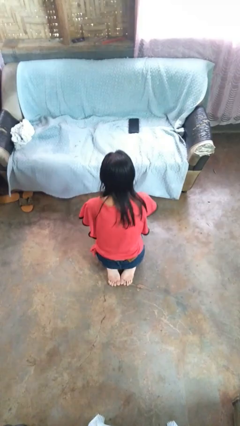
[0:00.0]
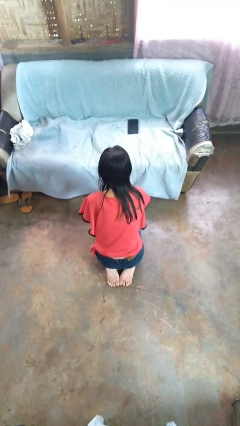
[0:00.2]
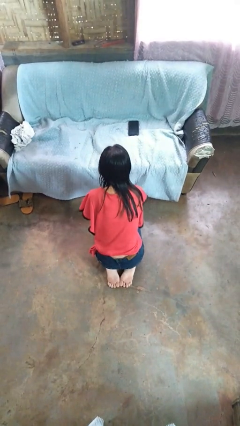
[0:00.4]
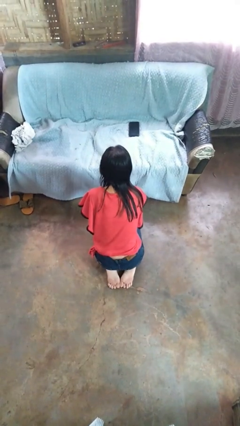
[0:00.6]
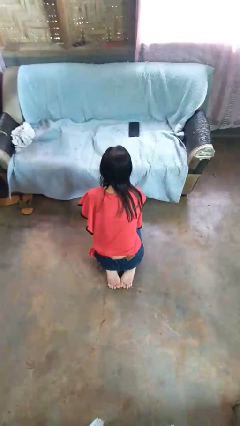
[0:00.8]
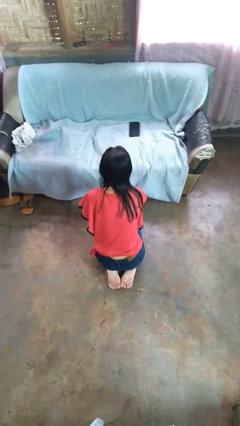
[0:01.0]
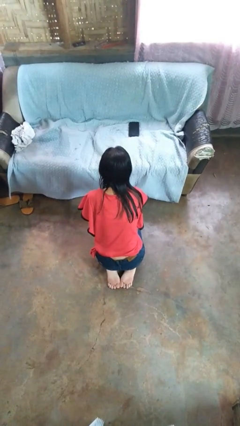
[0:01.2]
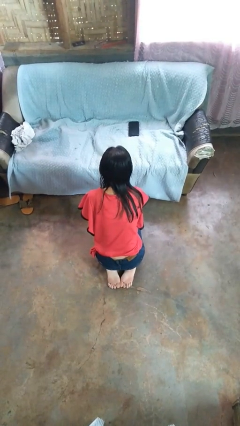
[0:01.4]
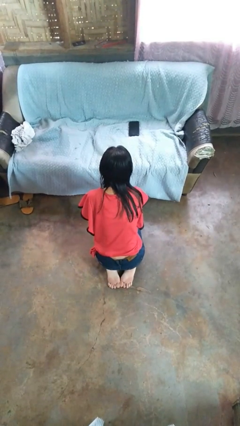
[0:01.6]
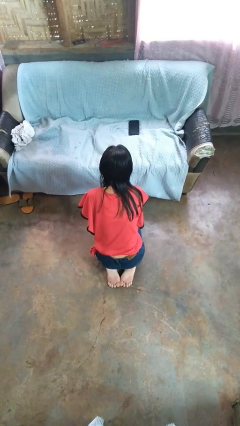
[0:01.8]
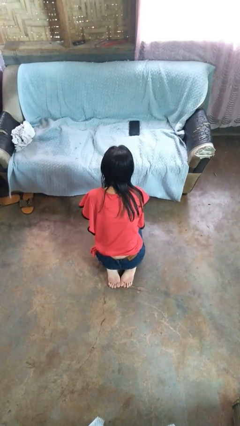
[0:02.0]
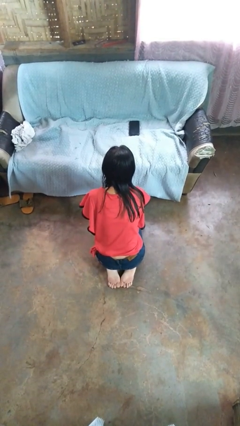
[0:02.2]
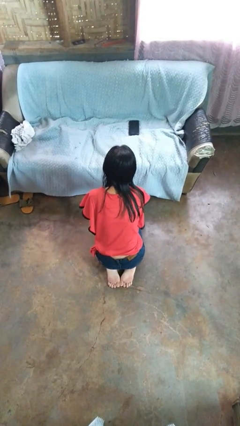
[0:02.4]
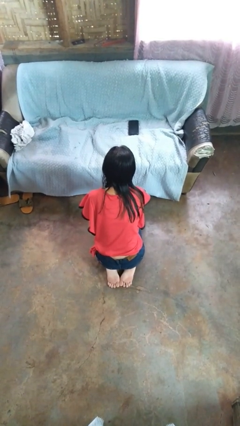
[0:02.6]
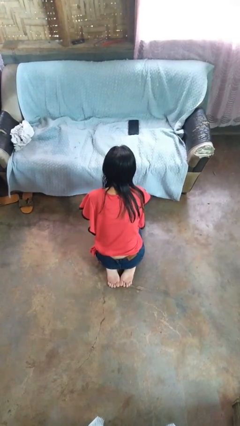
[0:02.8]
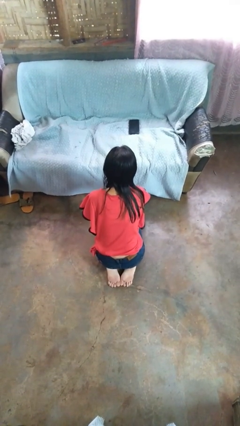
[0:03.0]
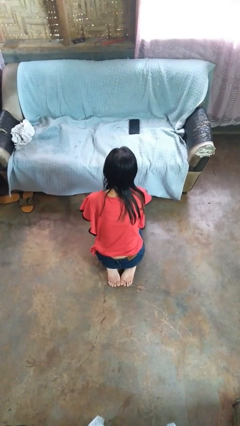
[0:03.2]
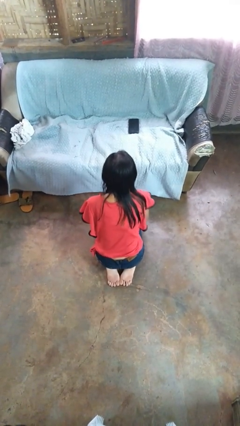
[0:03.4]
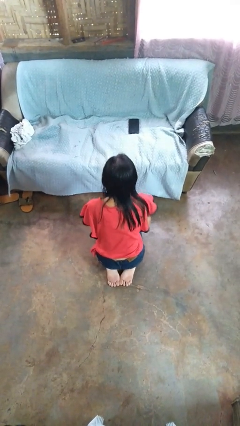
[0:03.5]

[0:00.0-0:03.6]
person searches under couch

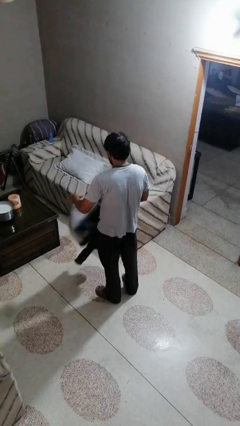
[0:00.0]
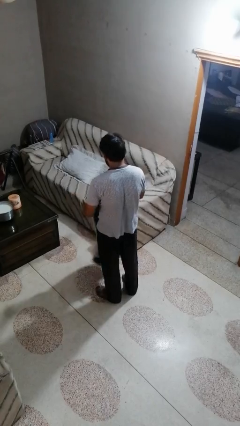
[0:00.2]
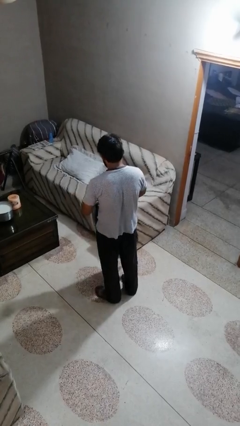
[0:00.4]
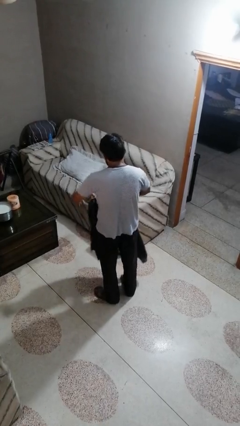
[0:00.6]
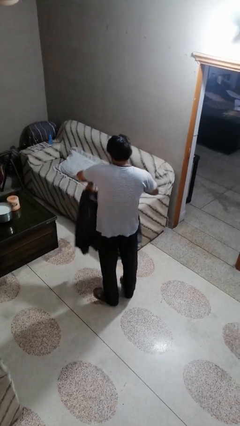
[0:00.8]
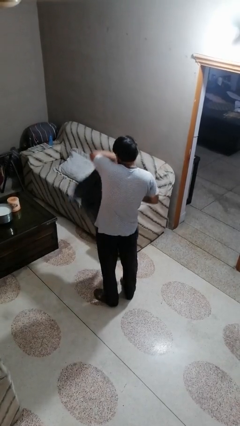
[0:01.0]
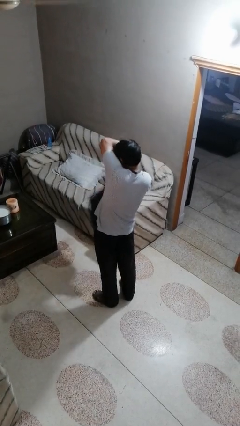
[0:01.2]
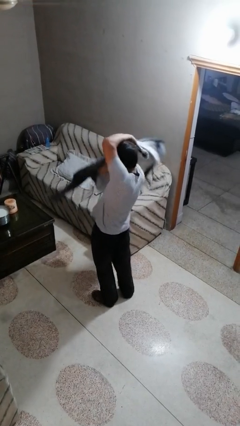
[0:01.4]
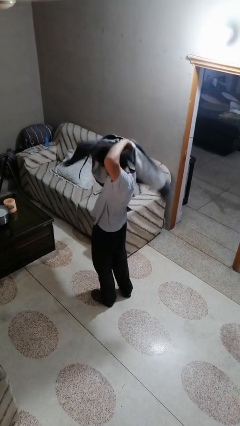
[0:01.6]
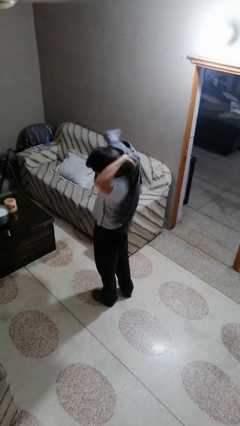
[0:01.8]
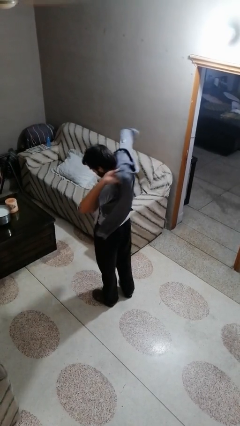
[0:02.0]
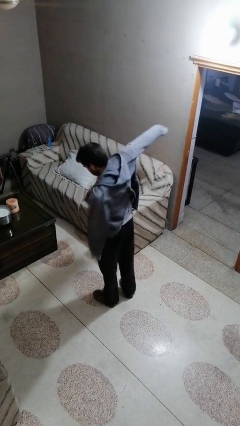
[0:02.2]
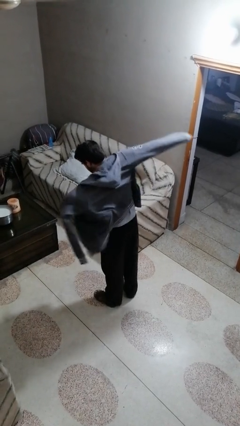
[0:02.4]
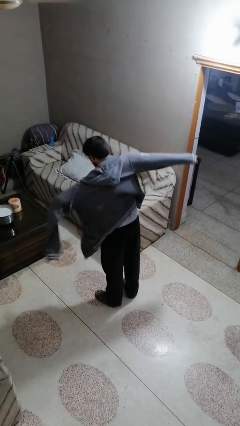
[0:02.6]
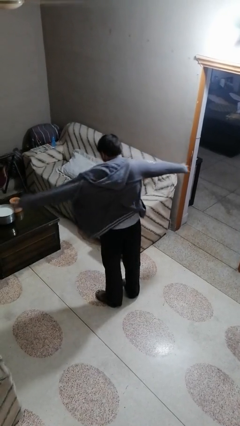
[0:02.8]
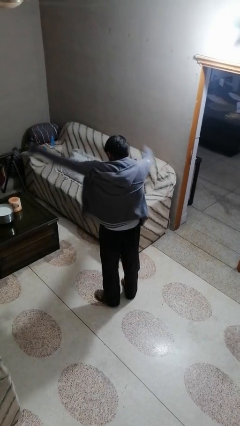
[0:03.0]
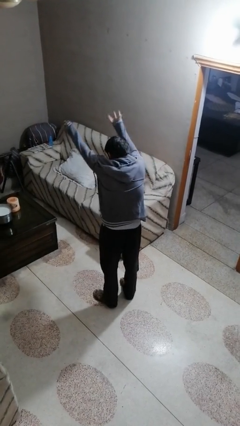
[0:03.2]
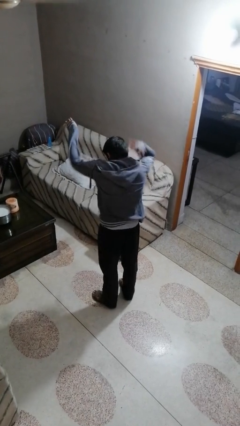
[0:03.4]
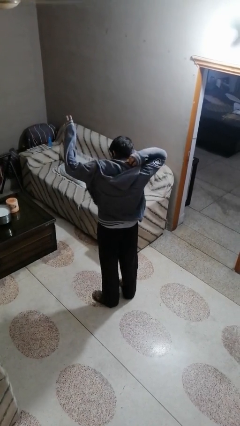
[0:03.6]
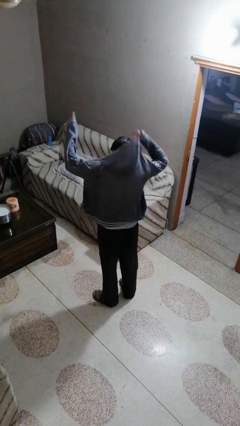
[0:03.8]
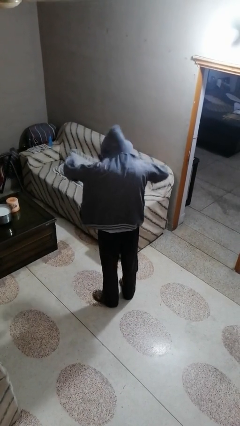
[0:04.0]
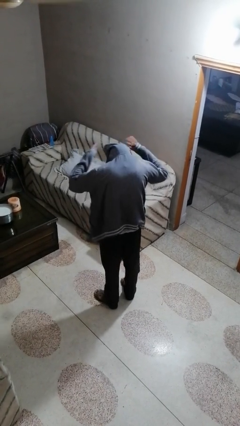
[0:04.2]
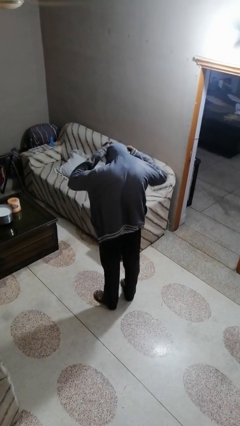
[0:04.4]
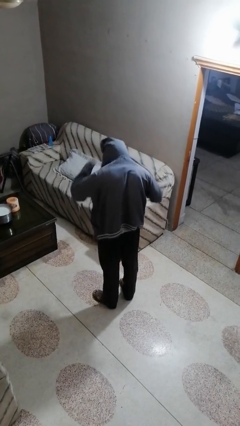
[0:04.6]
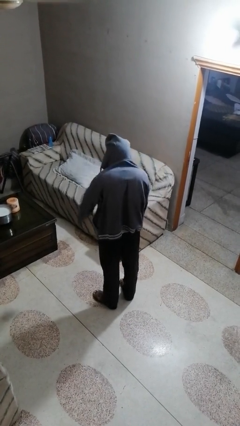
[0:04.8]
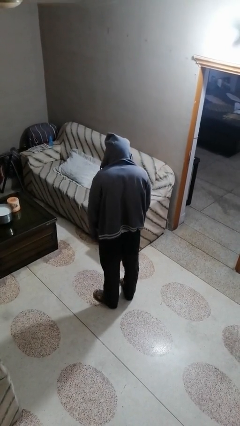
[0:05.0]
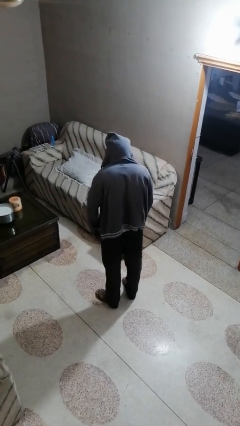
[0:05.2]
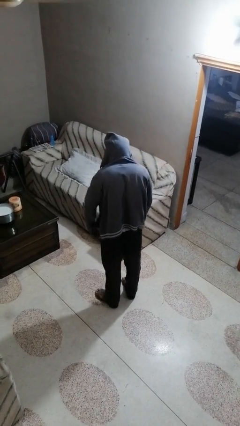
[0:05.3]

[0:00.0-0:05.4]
person puts on hoodie

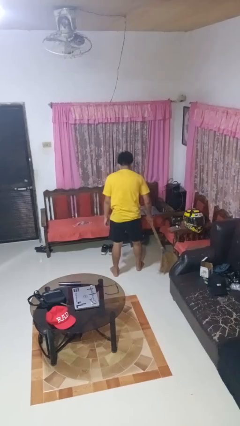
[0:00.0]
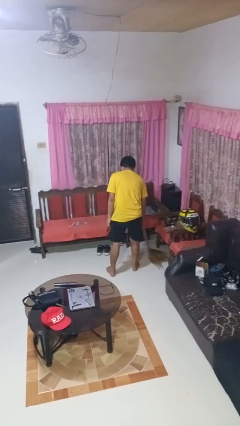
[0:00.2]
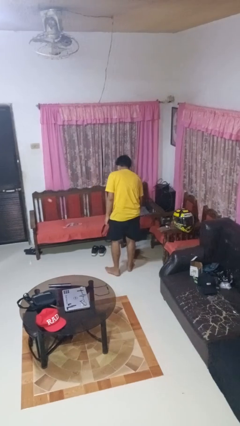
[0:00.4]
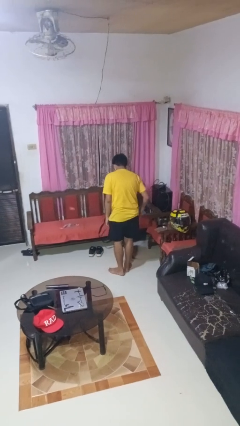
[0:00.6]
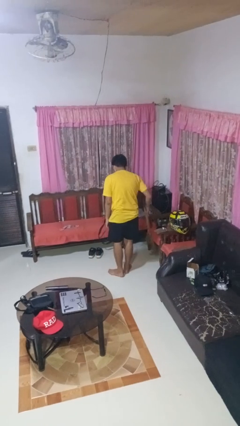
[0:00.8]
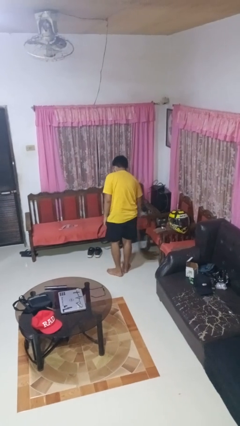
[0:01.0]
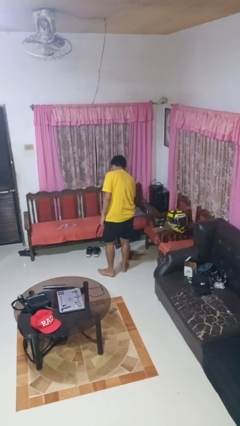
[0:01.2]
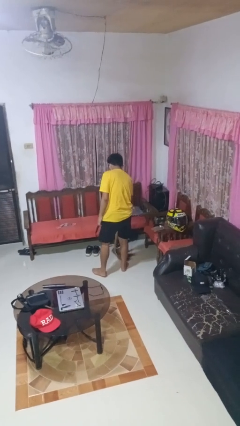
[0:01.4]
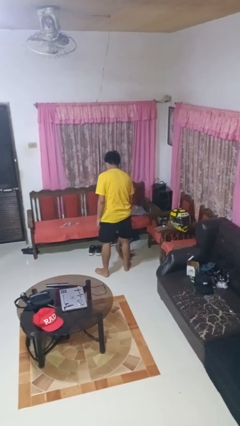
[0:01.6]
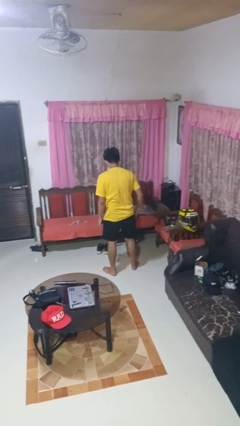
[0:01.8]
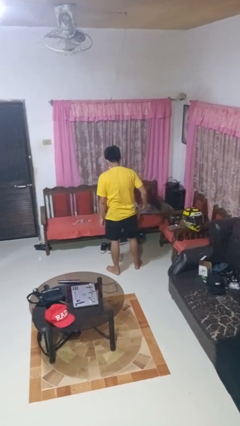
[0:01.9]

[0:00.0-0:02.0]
person sweeps floor

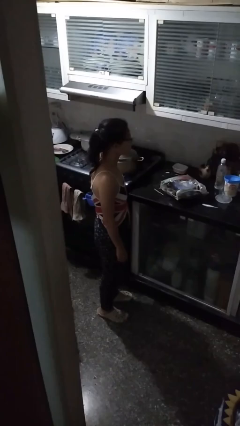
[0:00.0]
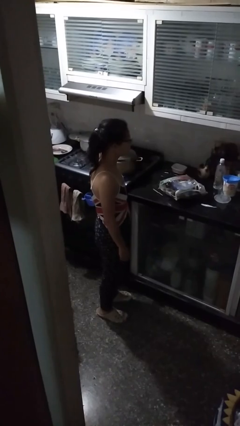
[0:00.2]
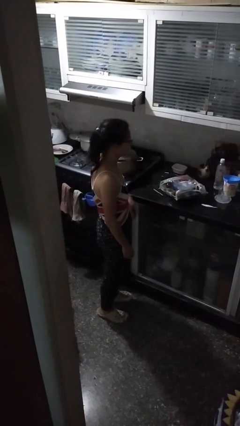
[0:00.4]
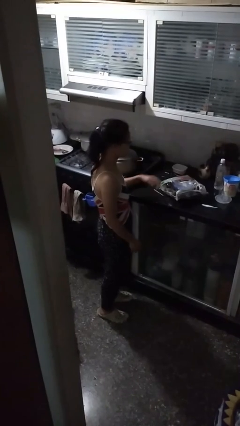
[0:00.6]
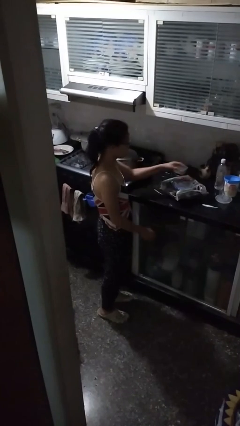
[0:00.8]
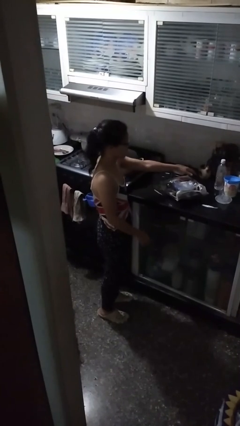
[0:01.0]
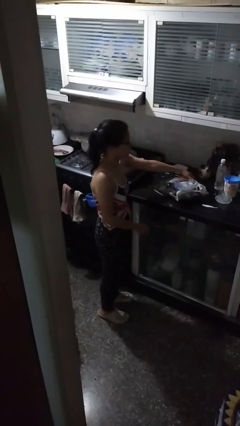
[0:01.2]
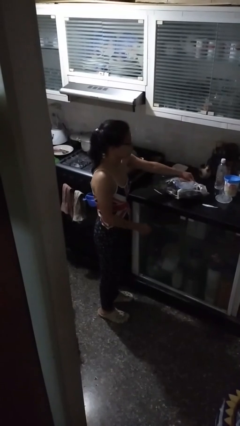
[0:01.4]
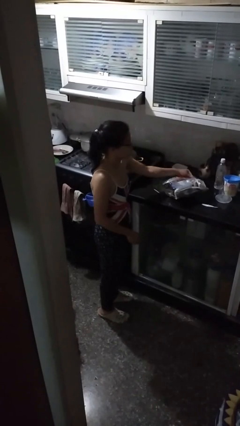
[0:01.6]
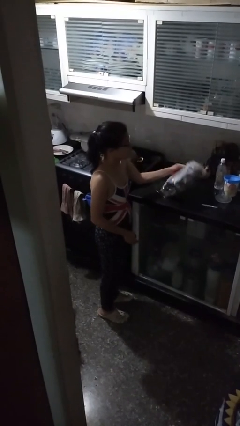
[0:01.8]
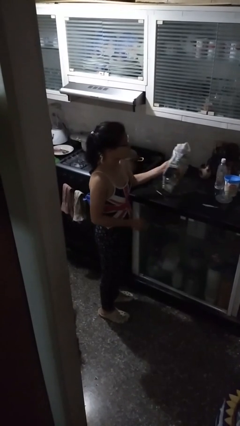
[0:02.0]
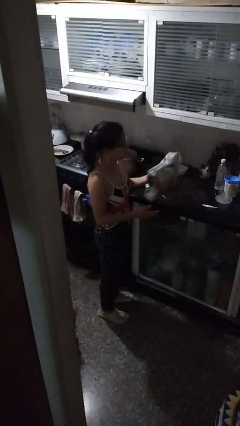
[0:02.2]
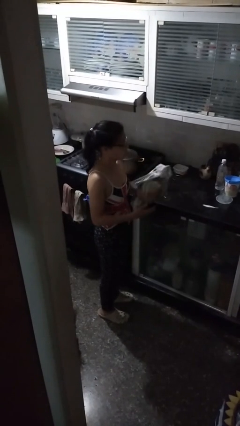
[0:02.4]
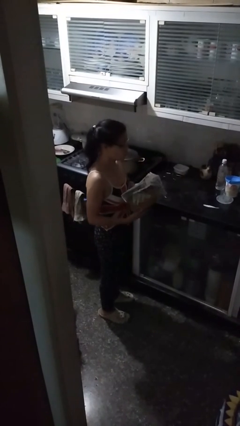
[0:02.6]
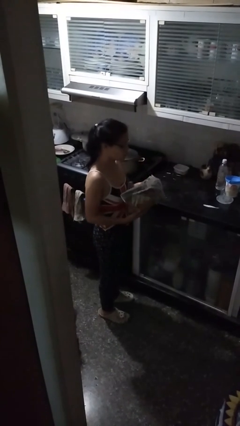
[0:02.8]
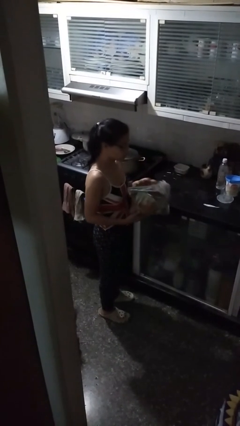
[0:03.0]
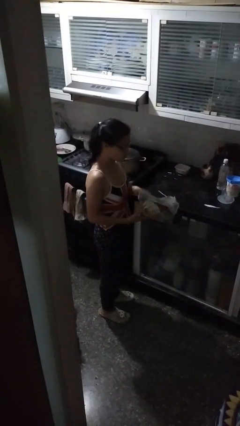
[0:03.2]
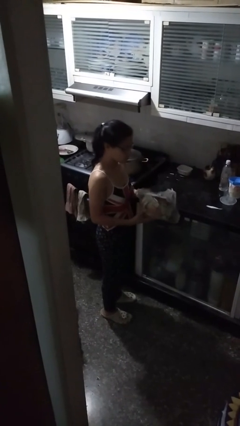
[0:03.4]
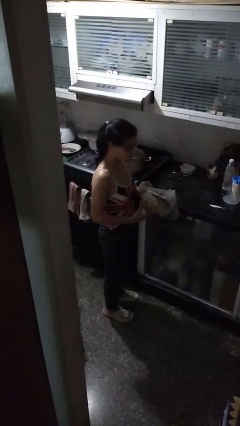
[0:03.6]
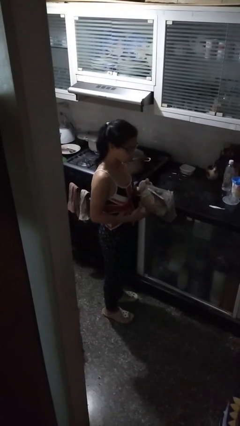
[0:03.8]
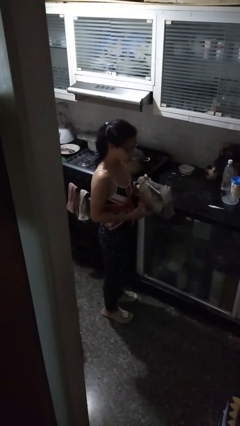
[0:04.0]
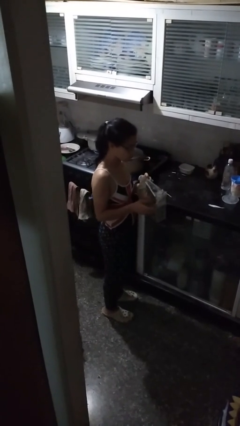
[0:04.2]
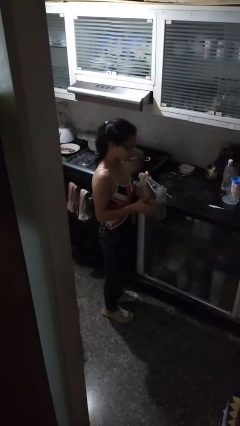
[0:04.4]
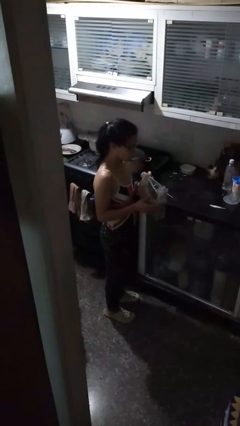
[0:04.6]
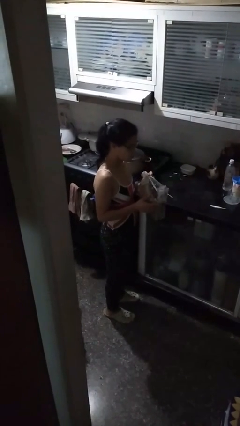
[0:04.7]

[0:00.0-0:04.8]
person picks up object from countertop

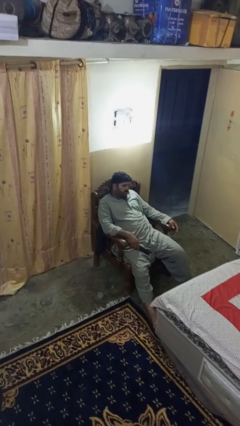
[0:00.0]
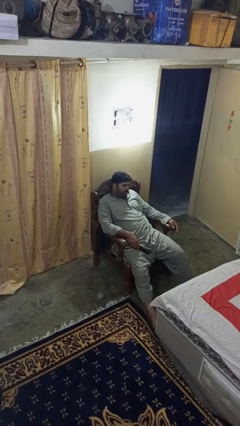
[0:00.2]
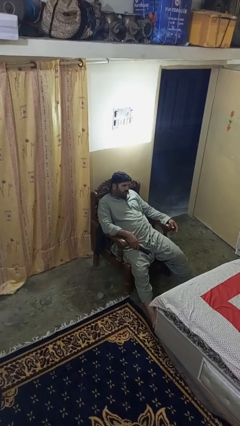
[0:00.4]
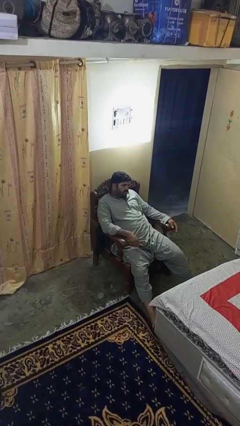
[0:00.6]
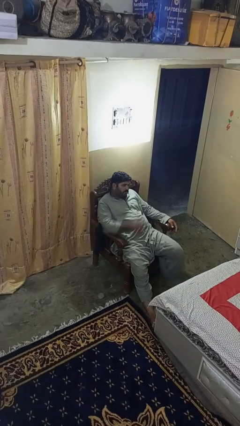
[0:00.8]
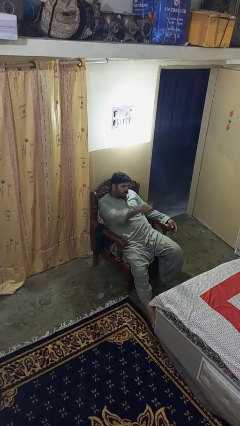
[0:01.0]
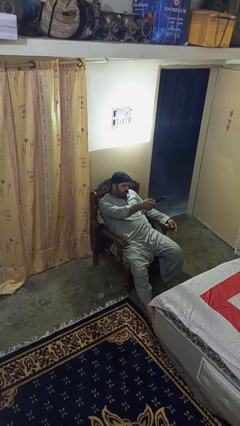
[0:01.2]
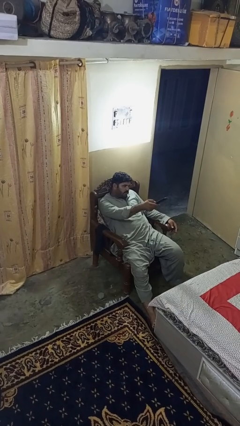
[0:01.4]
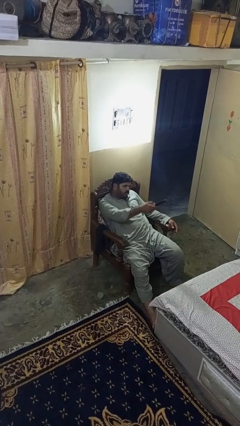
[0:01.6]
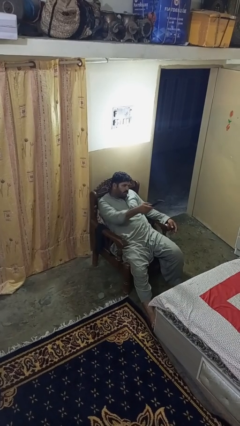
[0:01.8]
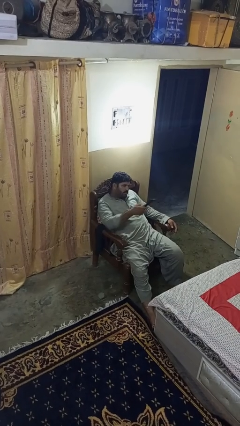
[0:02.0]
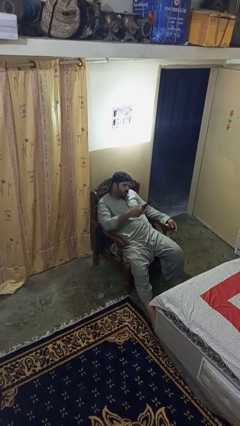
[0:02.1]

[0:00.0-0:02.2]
person uses television remote
